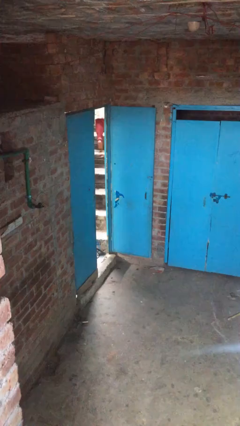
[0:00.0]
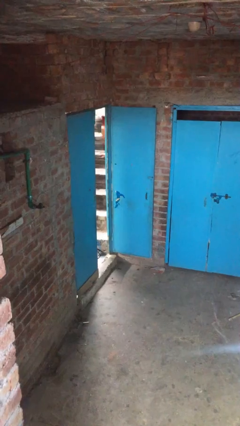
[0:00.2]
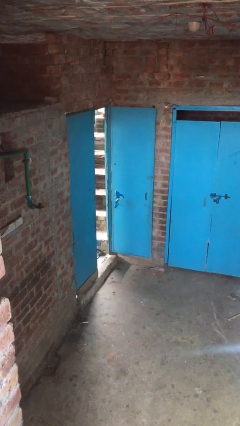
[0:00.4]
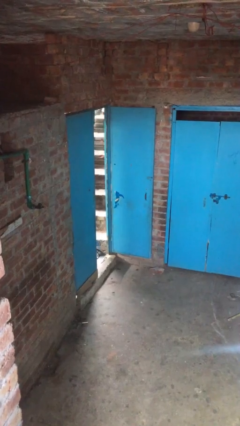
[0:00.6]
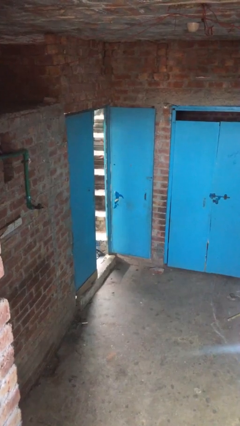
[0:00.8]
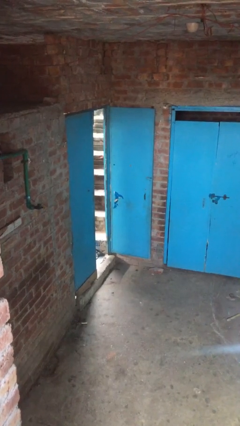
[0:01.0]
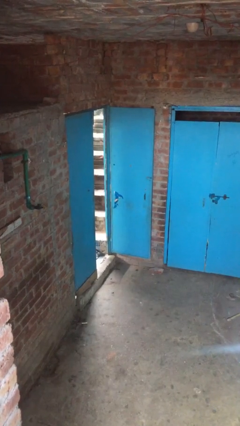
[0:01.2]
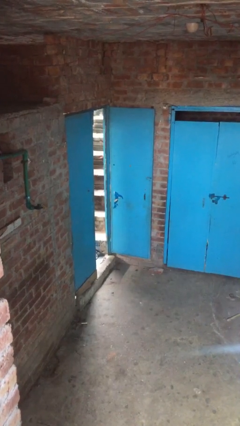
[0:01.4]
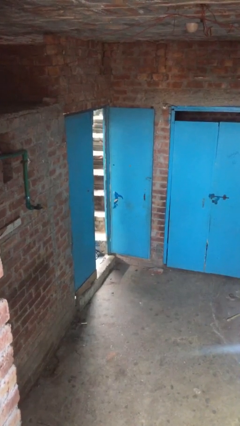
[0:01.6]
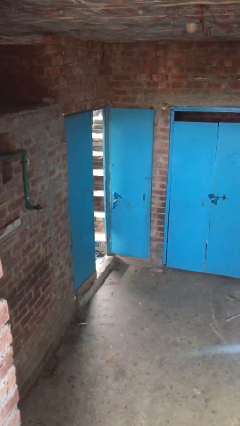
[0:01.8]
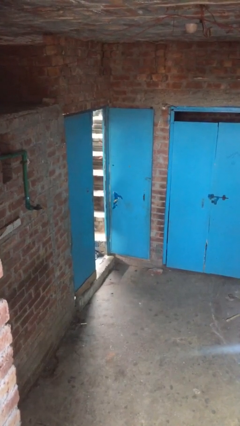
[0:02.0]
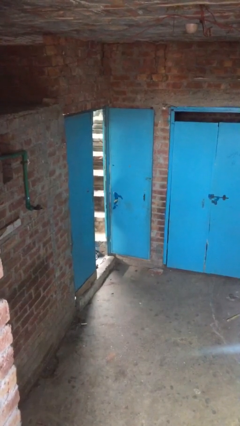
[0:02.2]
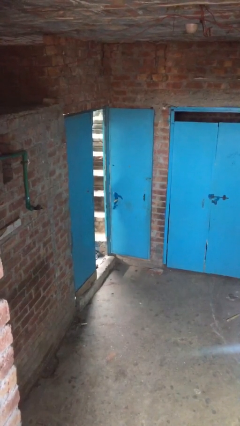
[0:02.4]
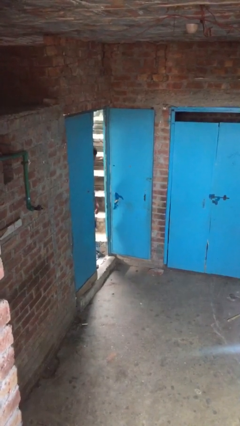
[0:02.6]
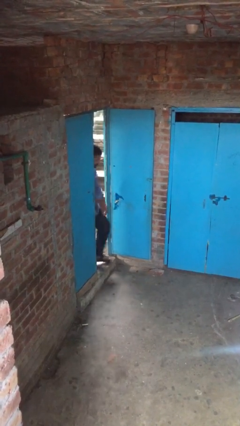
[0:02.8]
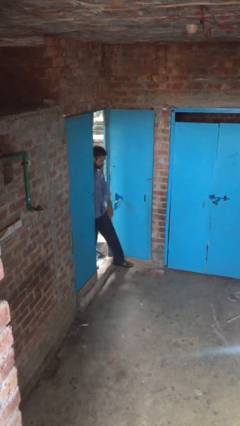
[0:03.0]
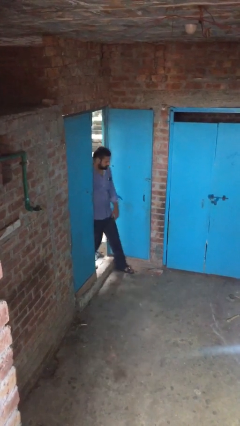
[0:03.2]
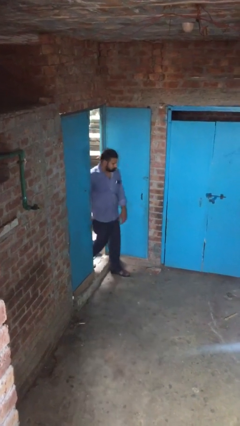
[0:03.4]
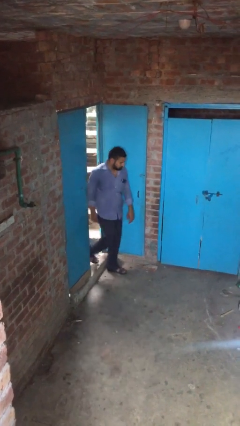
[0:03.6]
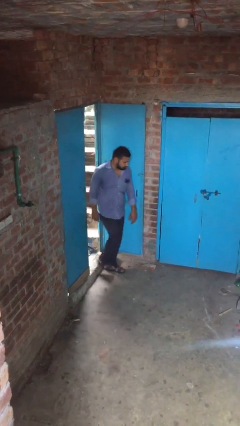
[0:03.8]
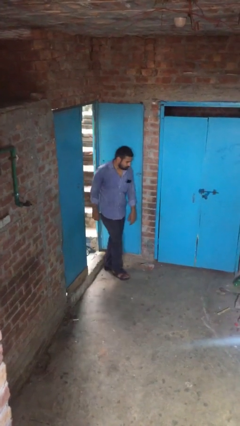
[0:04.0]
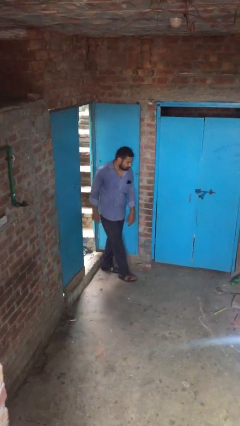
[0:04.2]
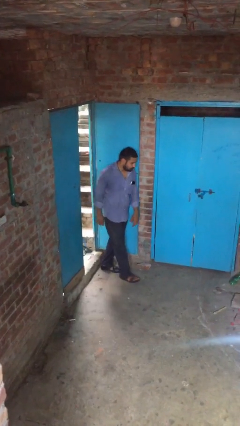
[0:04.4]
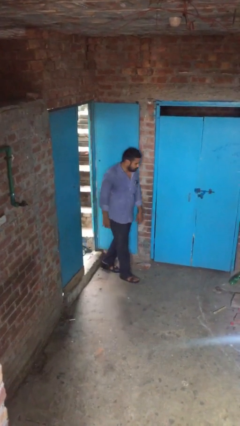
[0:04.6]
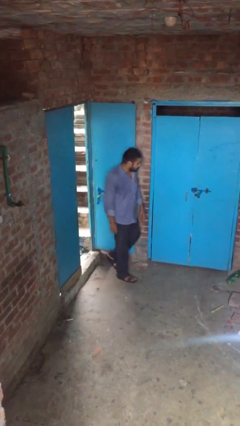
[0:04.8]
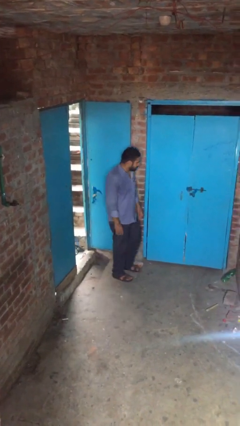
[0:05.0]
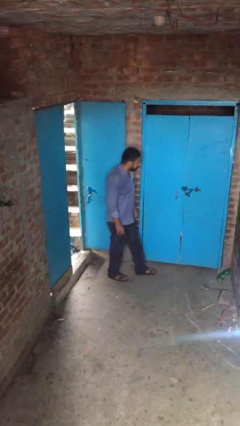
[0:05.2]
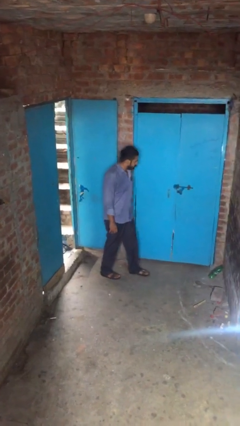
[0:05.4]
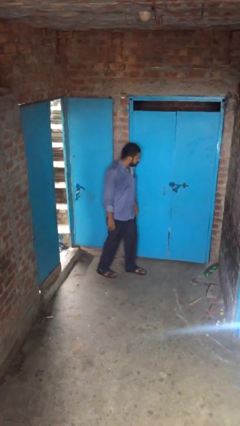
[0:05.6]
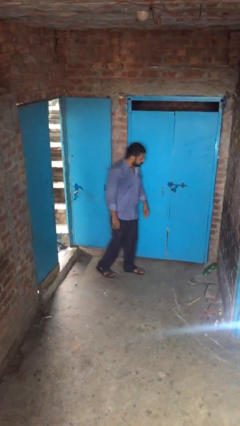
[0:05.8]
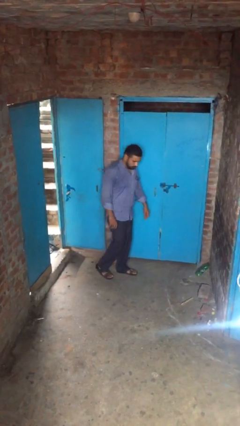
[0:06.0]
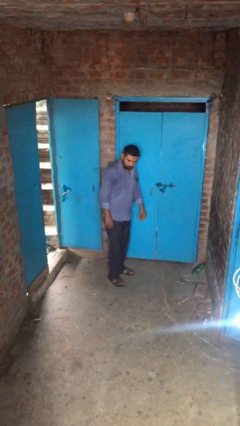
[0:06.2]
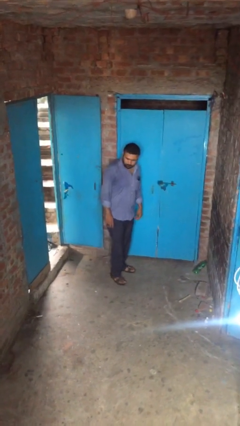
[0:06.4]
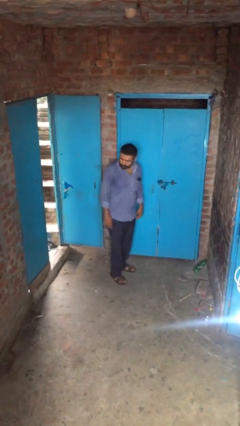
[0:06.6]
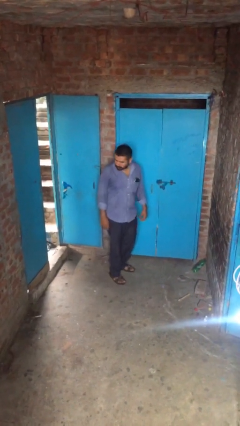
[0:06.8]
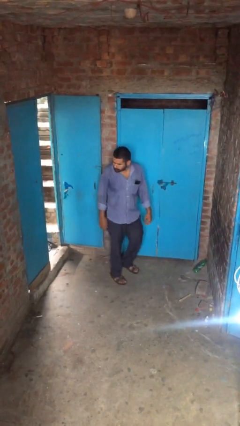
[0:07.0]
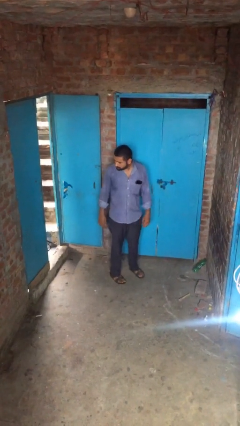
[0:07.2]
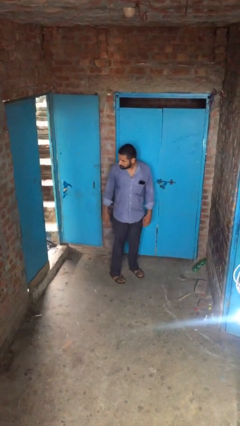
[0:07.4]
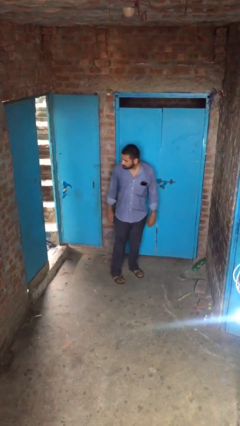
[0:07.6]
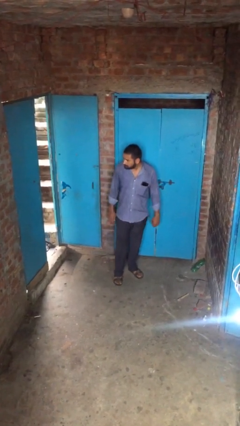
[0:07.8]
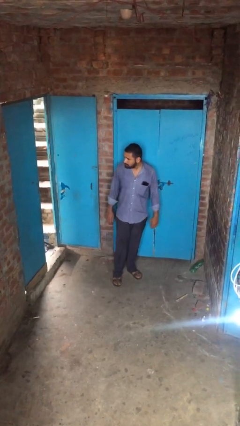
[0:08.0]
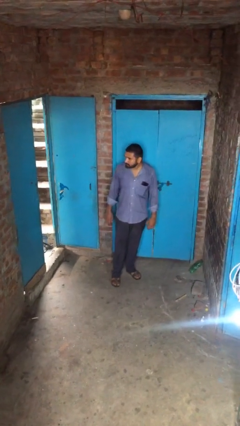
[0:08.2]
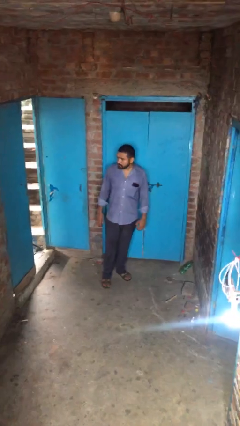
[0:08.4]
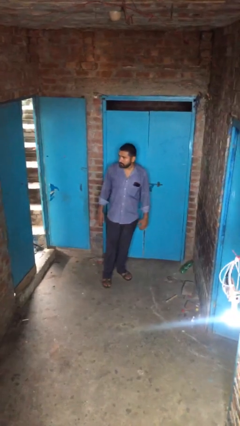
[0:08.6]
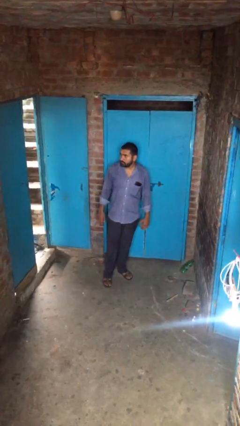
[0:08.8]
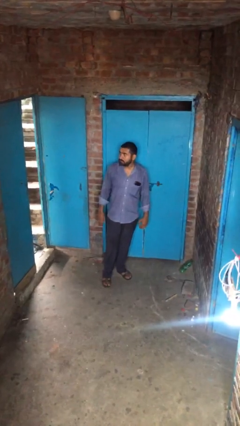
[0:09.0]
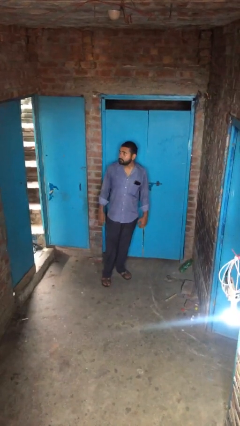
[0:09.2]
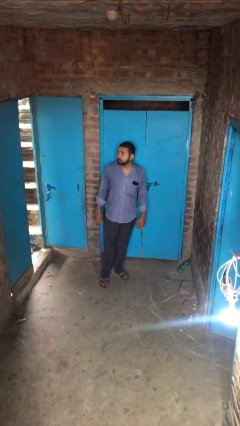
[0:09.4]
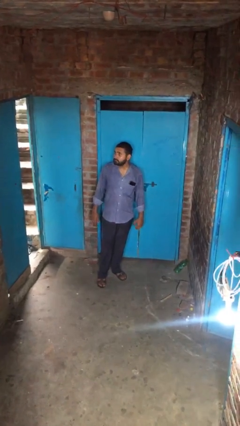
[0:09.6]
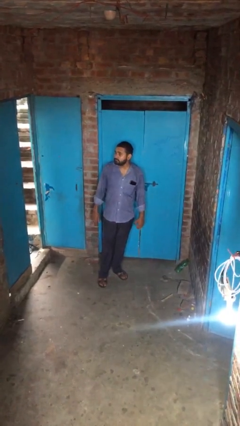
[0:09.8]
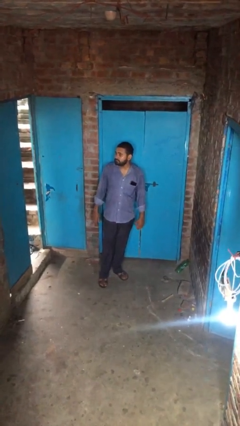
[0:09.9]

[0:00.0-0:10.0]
person enters scene through structure

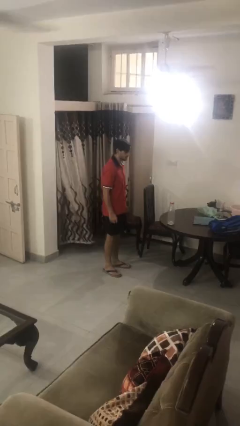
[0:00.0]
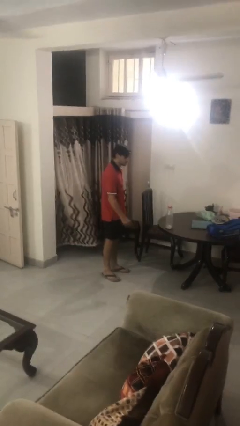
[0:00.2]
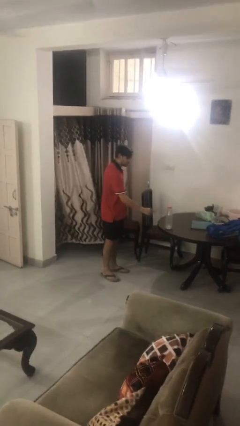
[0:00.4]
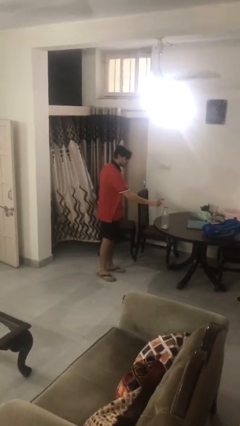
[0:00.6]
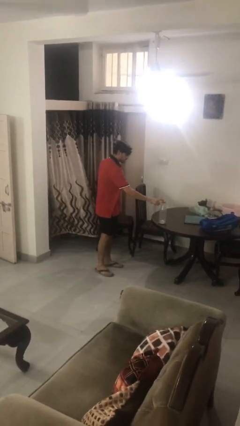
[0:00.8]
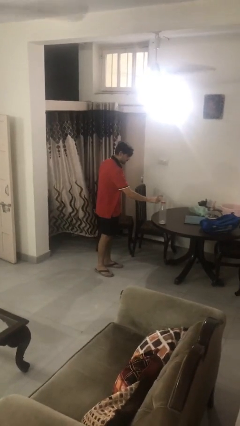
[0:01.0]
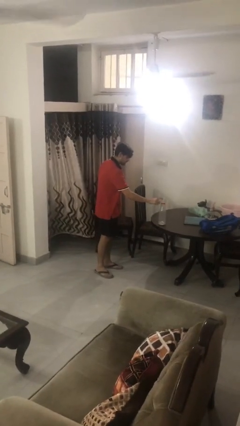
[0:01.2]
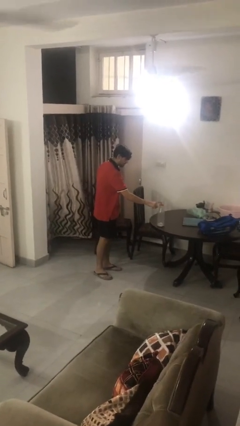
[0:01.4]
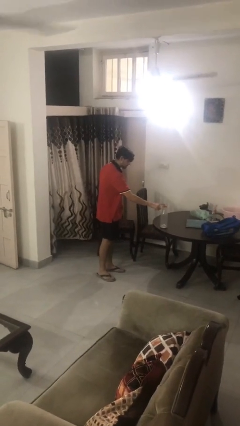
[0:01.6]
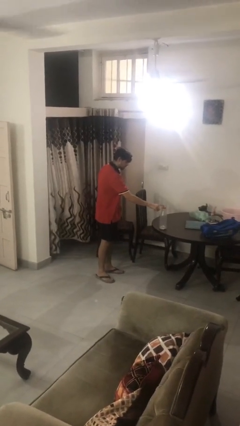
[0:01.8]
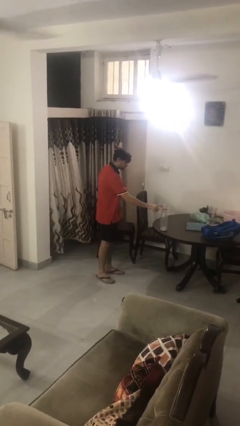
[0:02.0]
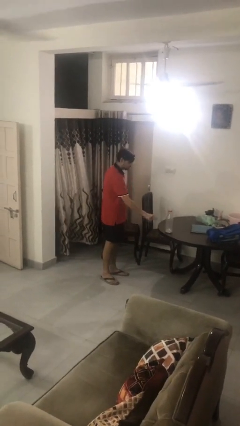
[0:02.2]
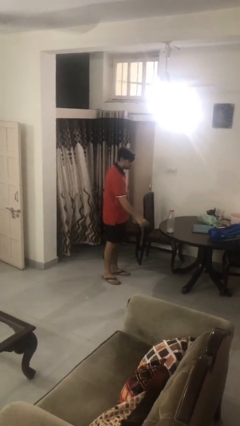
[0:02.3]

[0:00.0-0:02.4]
person taps object with finger

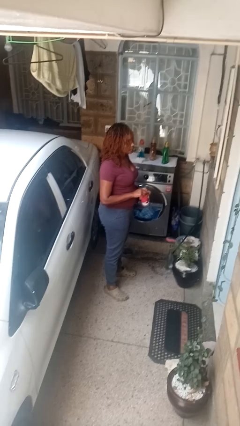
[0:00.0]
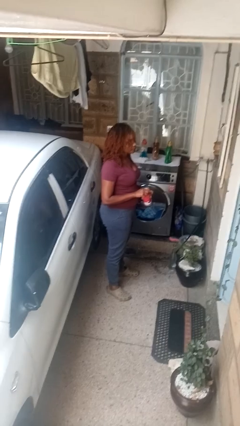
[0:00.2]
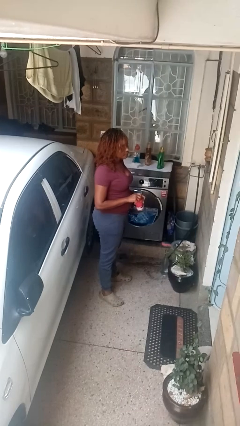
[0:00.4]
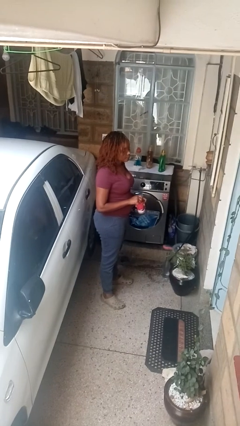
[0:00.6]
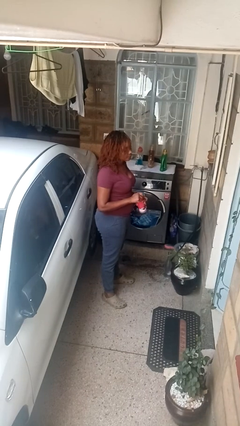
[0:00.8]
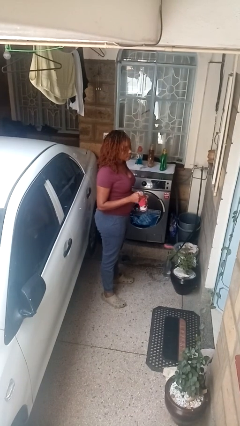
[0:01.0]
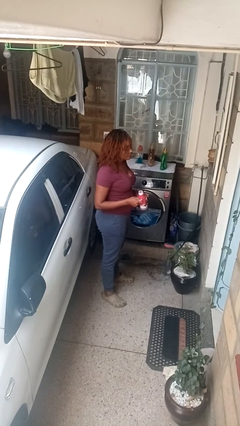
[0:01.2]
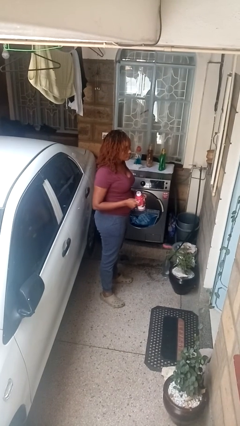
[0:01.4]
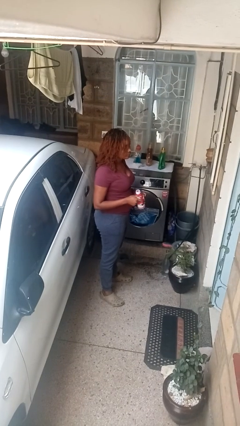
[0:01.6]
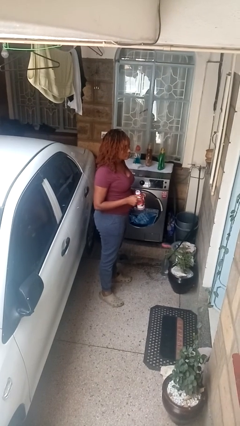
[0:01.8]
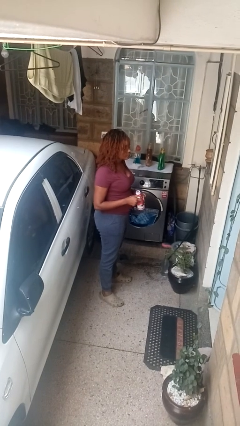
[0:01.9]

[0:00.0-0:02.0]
person opens beverage can

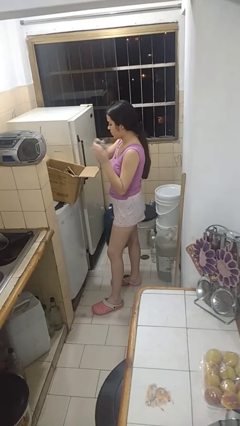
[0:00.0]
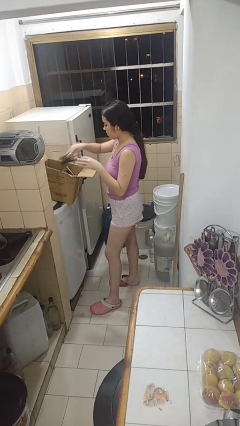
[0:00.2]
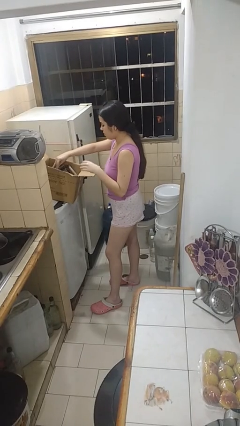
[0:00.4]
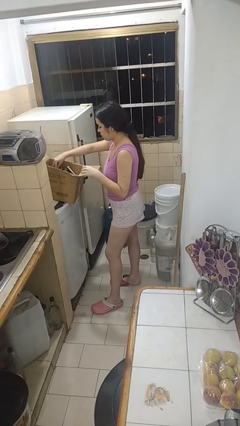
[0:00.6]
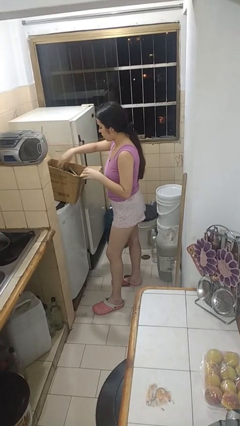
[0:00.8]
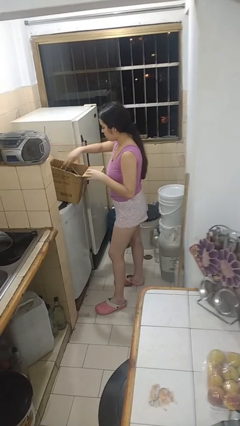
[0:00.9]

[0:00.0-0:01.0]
person puts object into box

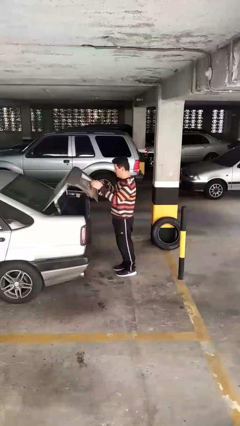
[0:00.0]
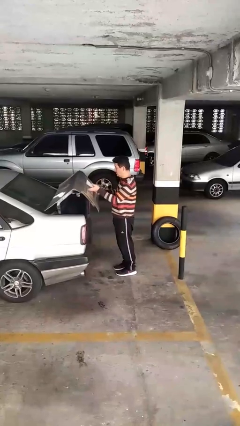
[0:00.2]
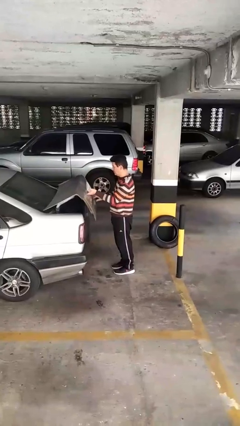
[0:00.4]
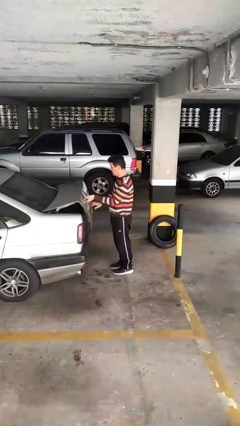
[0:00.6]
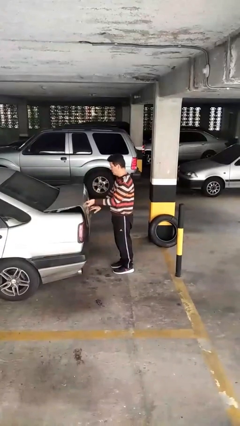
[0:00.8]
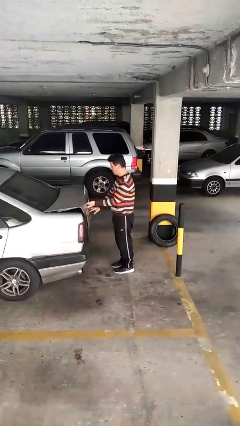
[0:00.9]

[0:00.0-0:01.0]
person closes car trunk

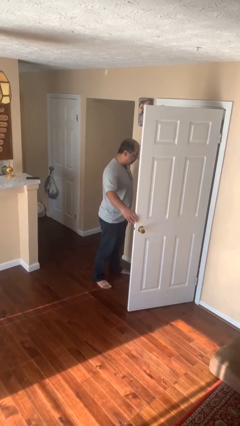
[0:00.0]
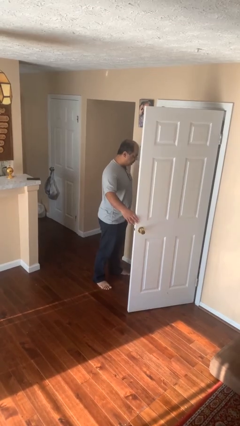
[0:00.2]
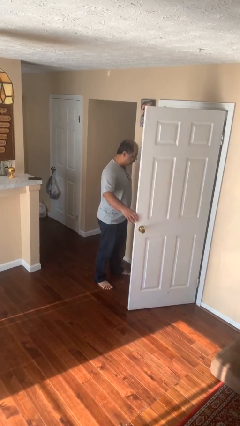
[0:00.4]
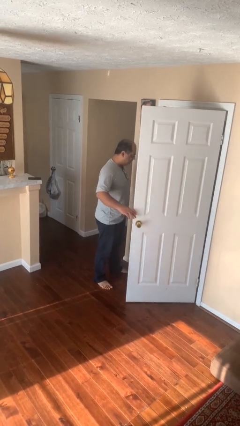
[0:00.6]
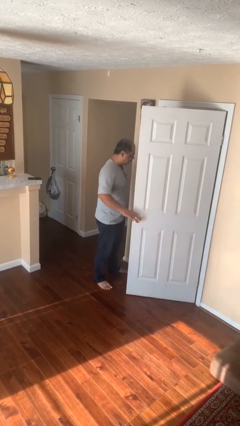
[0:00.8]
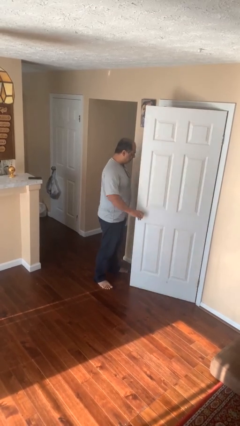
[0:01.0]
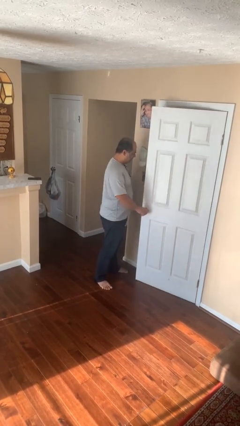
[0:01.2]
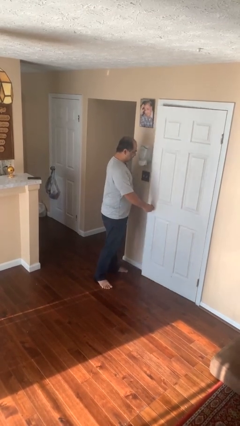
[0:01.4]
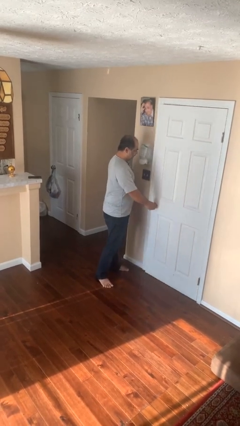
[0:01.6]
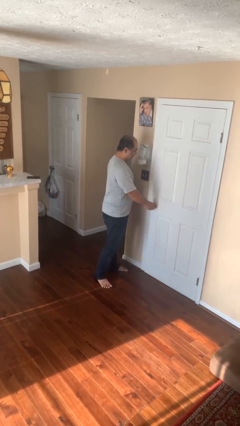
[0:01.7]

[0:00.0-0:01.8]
person closes facility door
